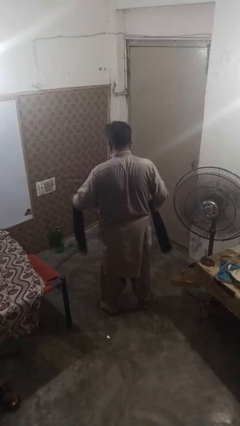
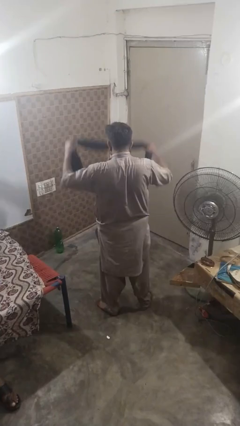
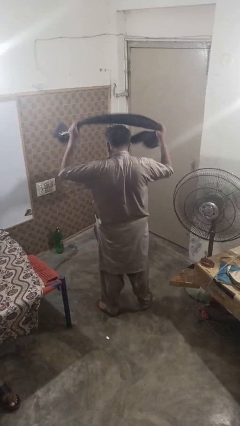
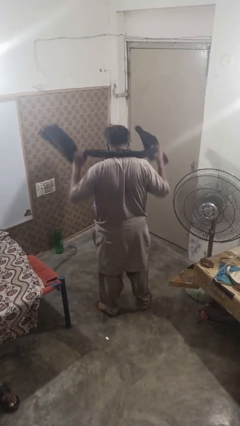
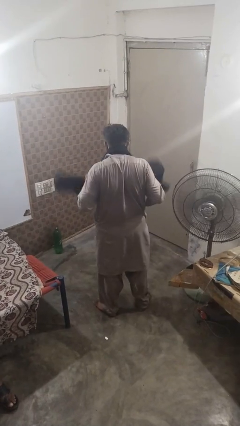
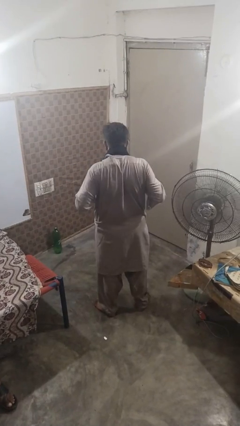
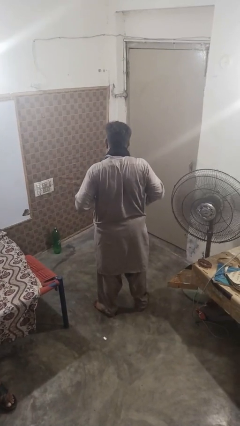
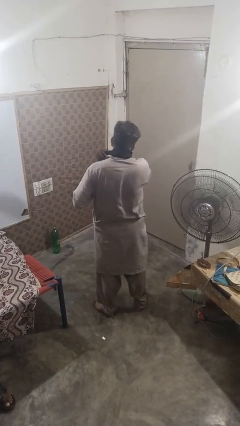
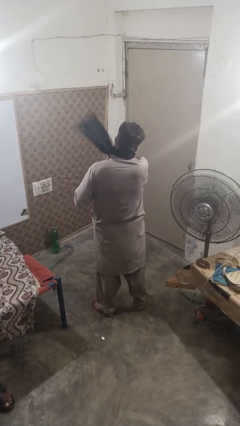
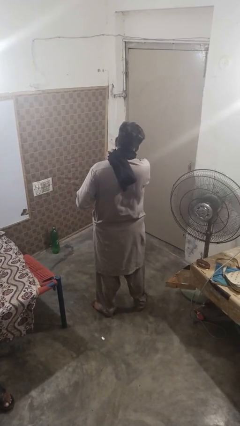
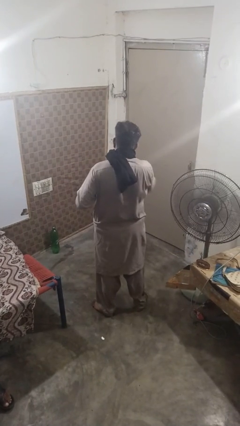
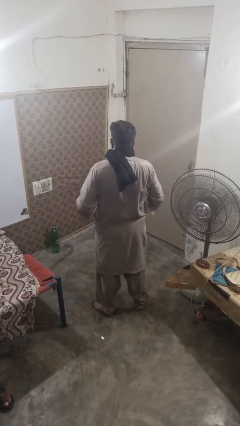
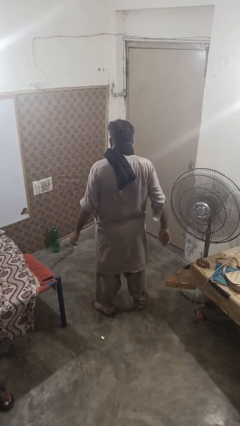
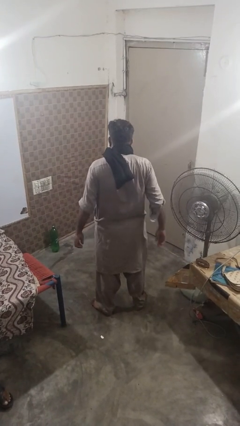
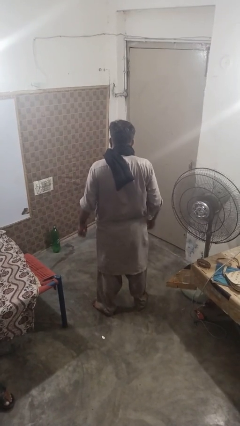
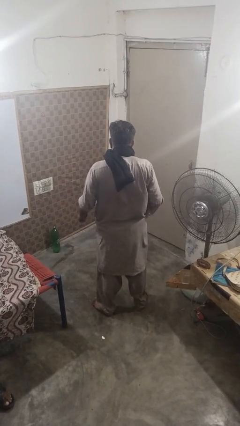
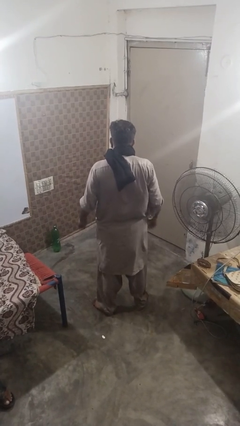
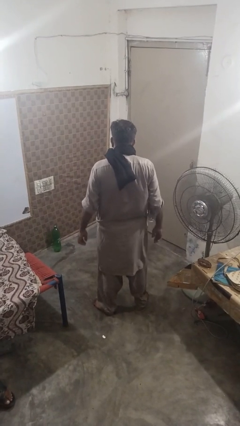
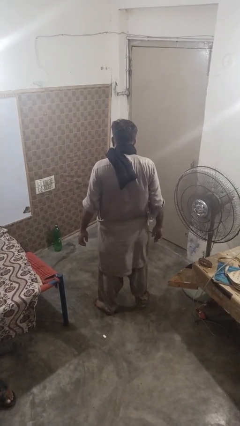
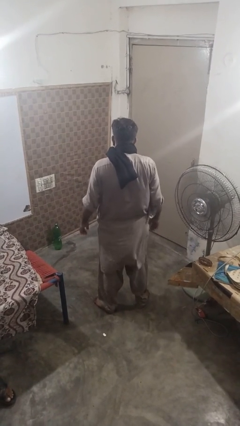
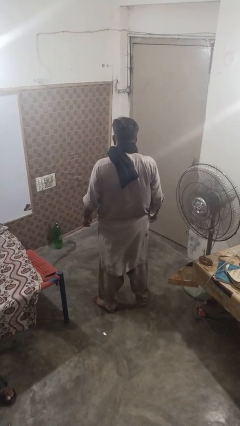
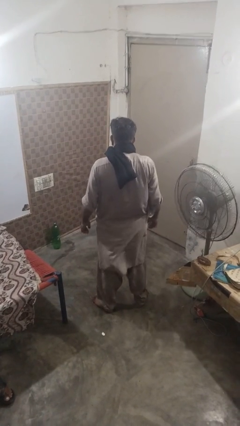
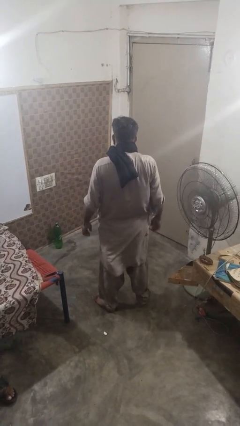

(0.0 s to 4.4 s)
person puts on scarf

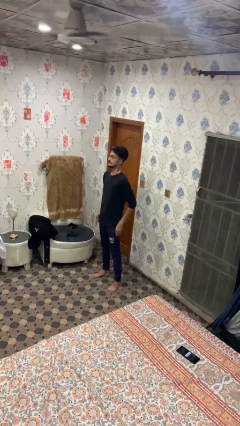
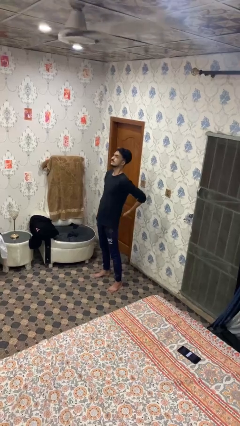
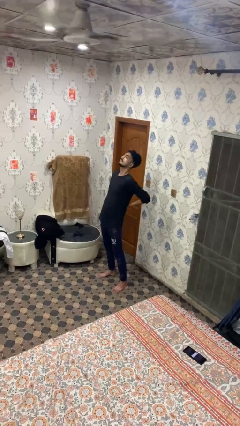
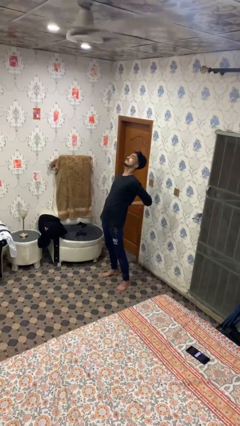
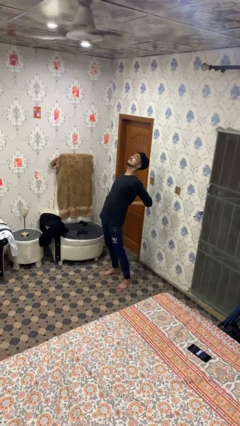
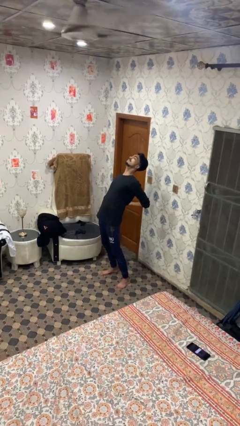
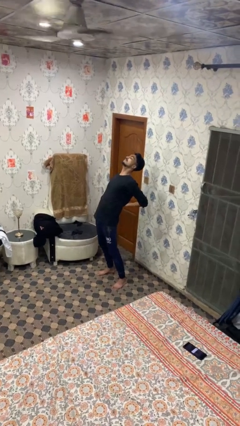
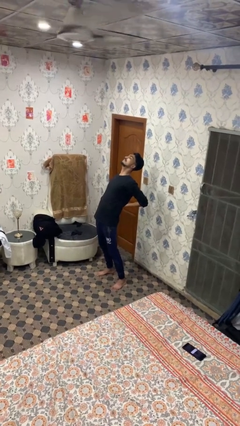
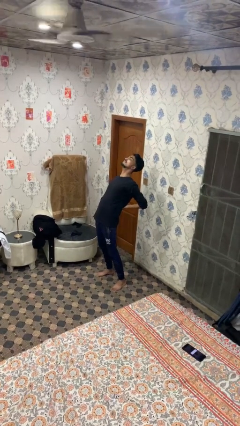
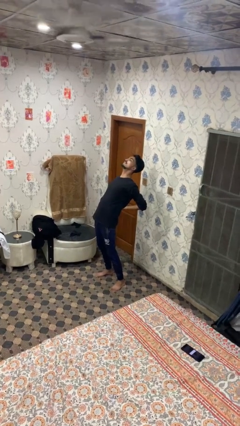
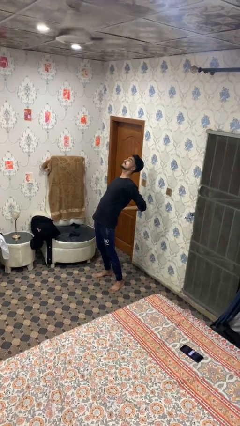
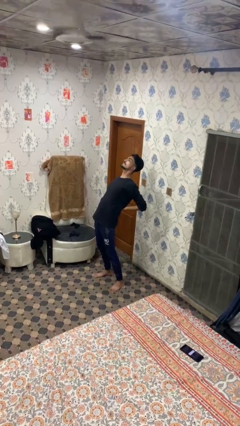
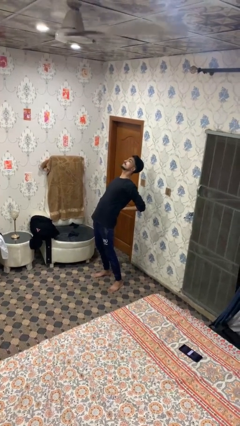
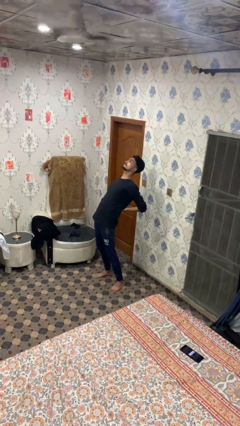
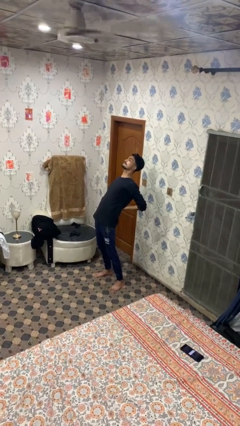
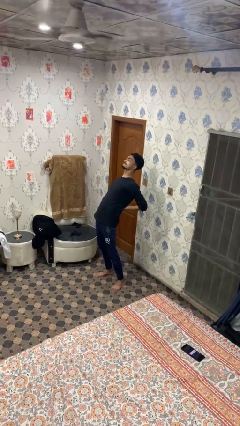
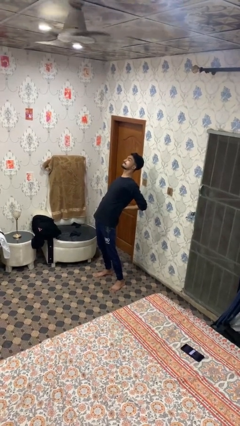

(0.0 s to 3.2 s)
person stretches back

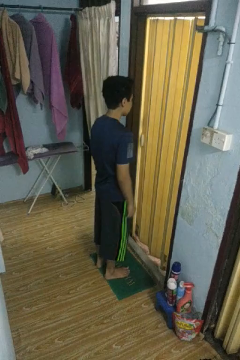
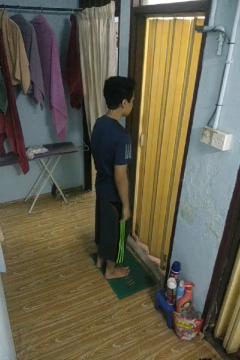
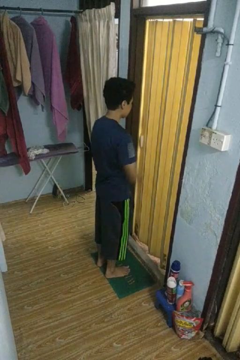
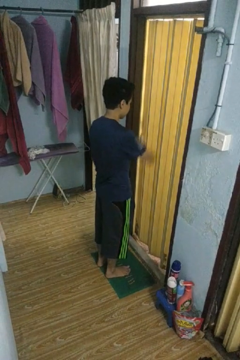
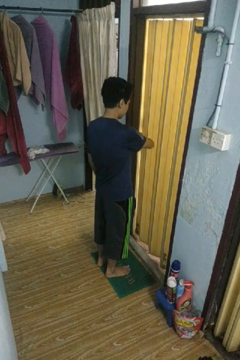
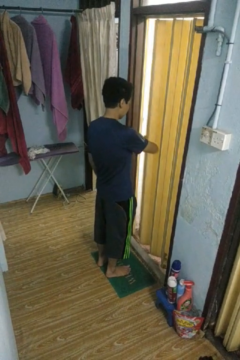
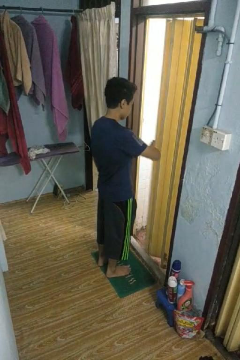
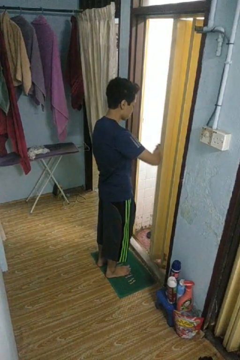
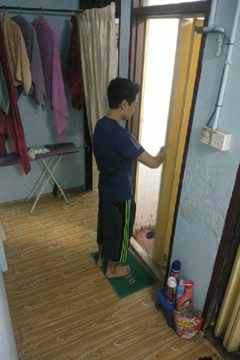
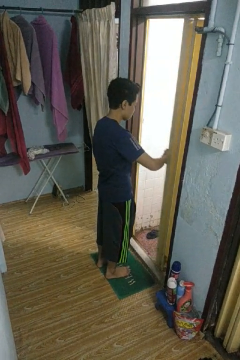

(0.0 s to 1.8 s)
person opens sliding door

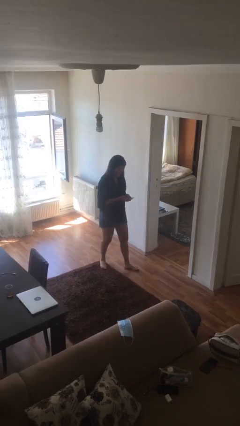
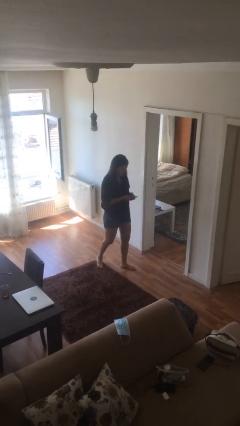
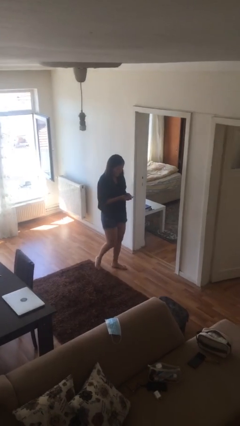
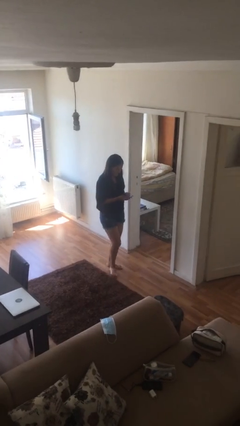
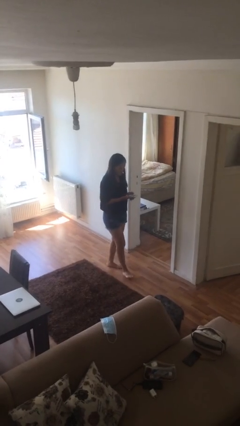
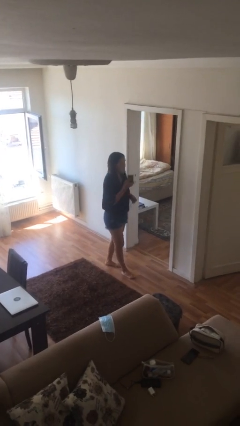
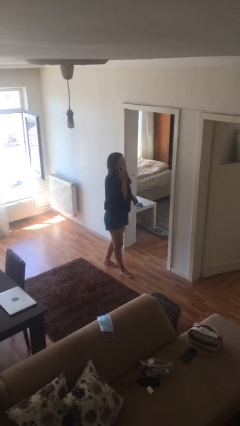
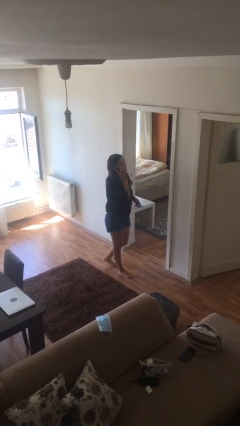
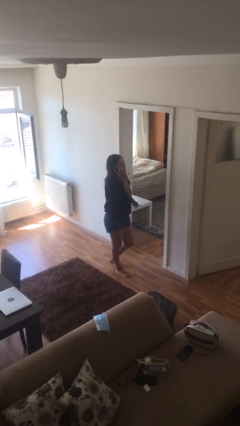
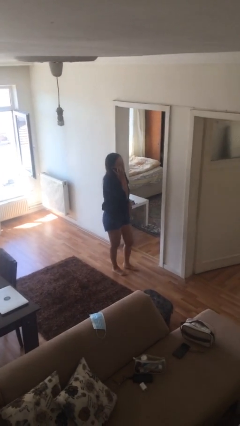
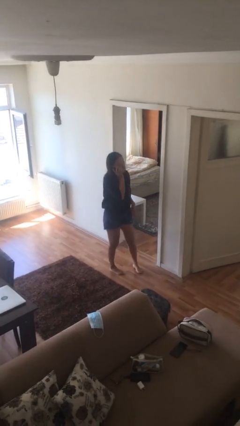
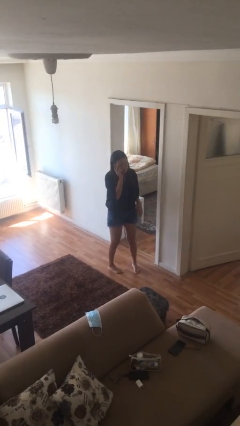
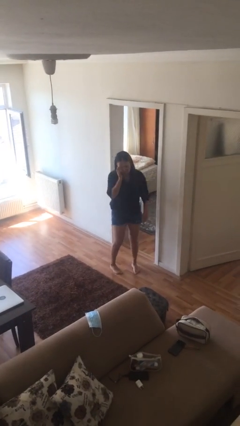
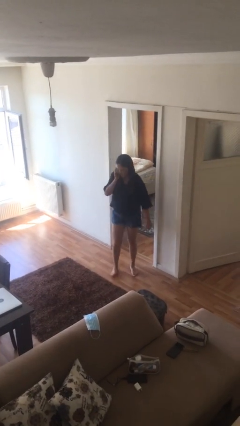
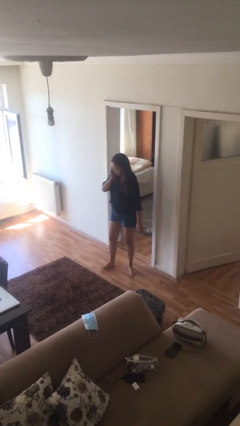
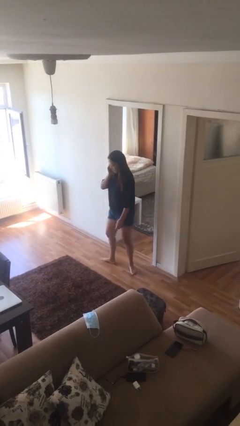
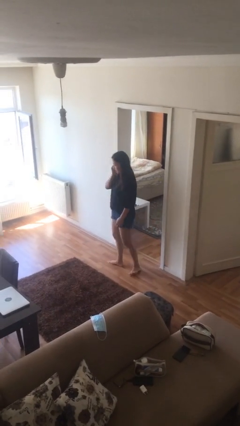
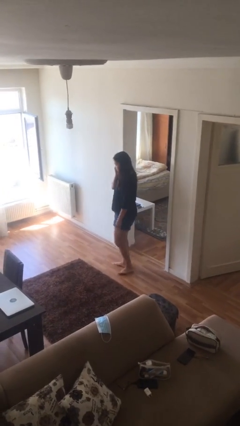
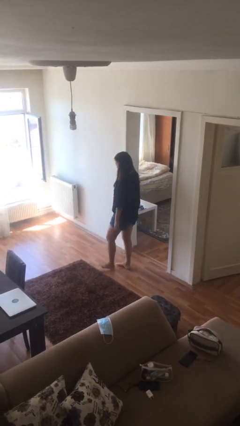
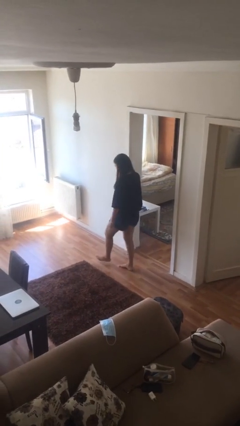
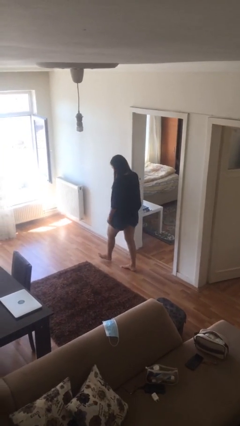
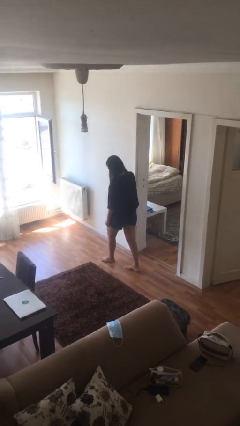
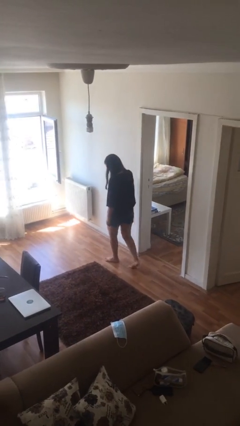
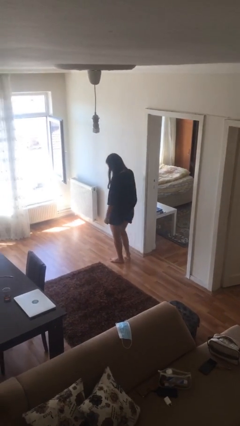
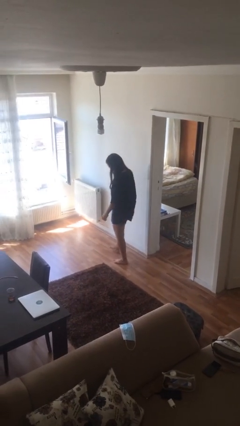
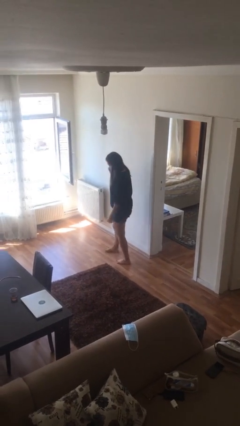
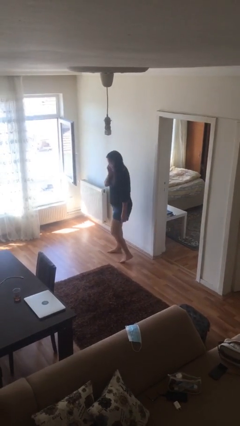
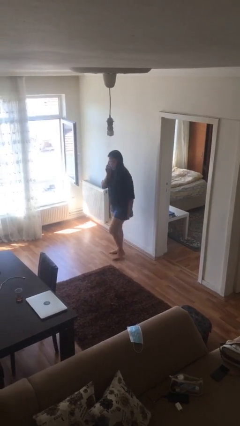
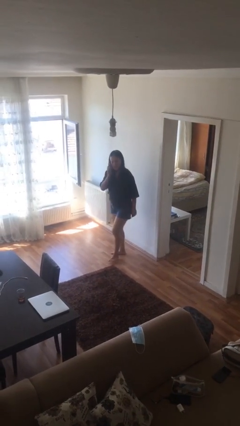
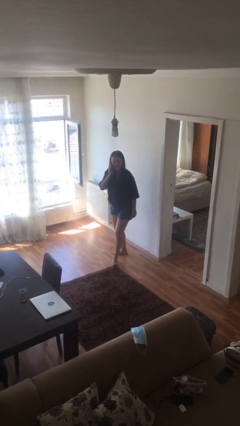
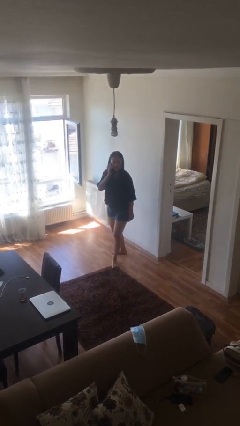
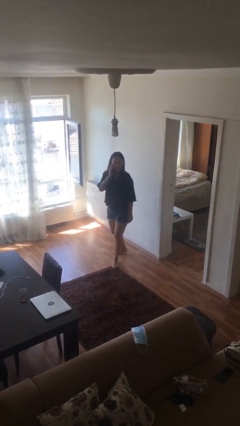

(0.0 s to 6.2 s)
person talks on phone

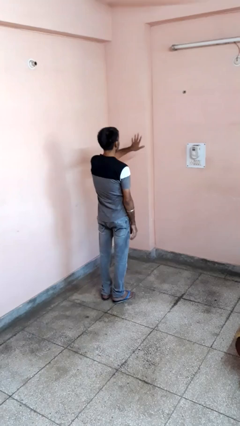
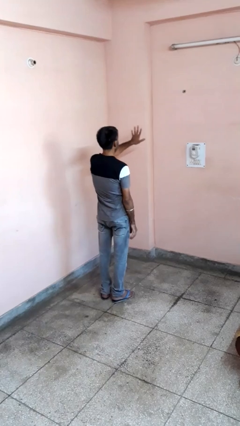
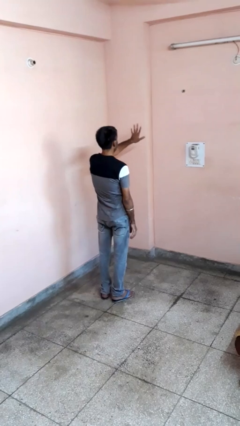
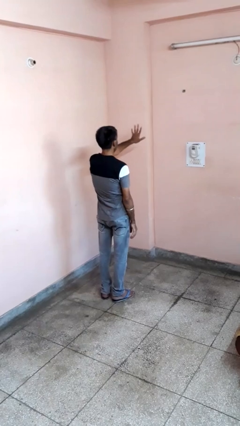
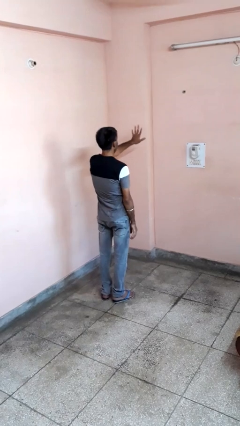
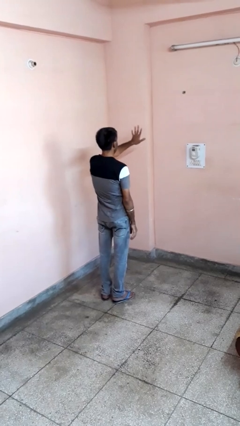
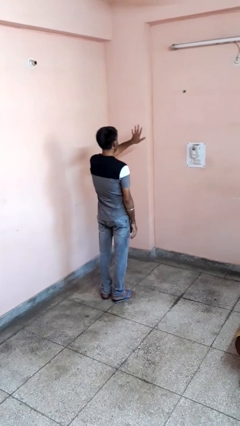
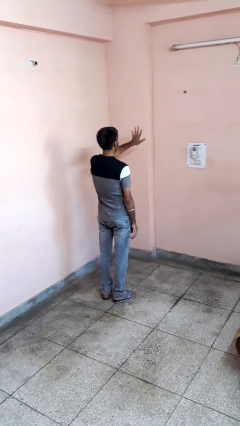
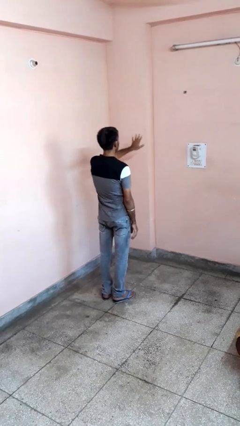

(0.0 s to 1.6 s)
person gestures number five

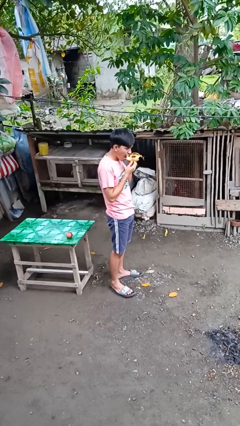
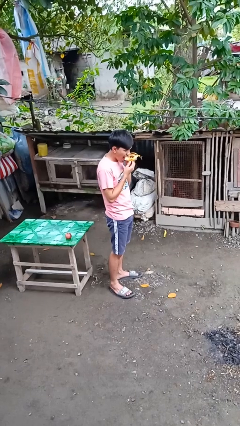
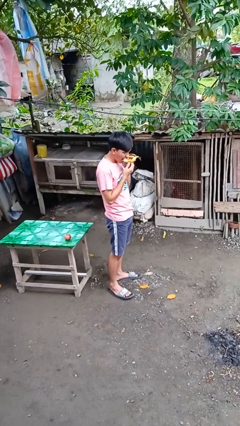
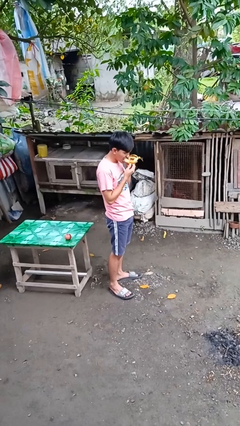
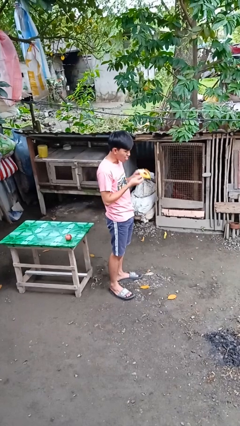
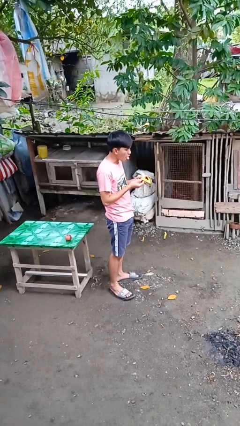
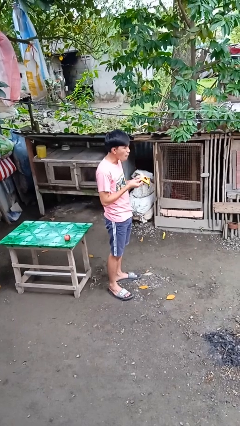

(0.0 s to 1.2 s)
person eats banana
